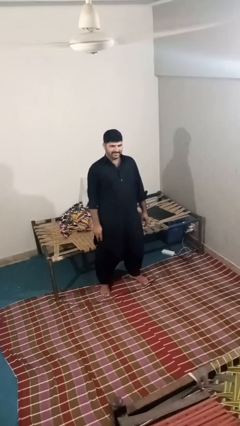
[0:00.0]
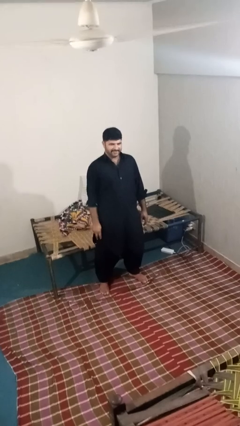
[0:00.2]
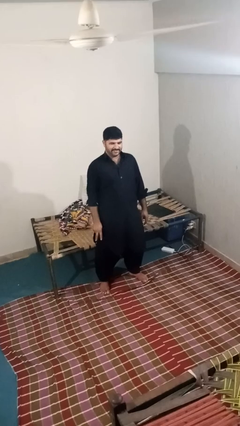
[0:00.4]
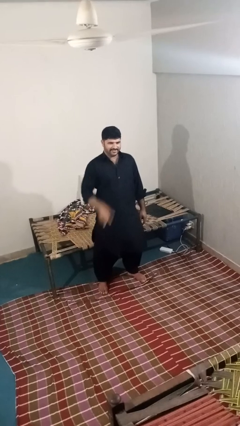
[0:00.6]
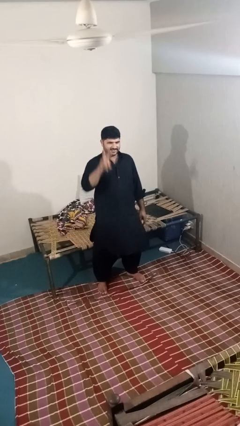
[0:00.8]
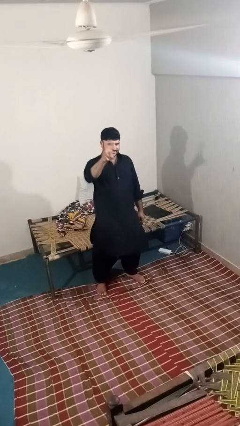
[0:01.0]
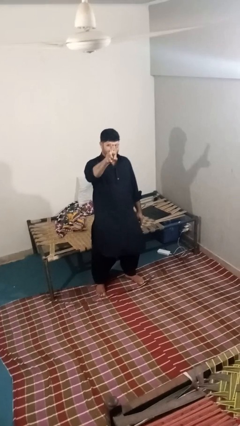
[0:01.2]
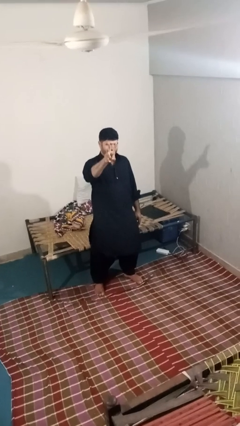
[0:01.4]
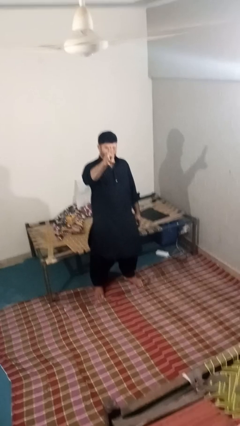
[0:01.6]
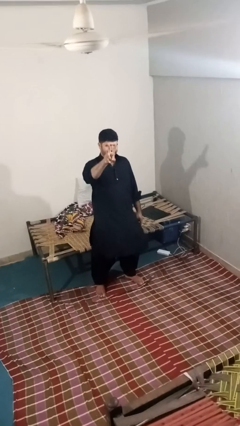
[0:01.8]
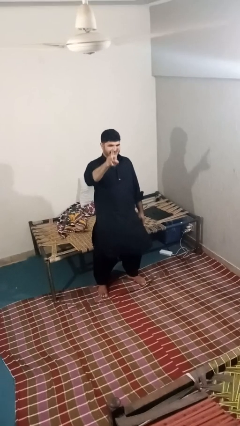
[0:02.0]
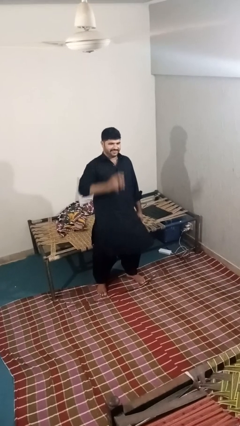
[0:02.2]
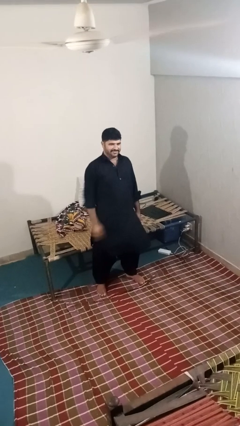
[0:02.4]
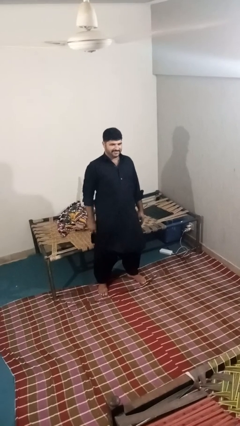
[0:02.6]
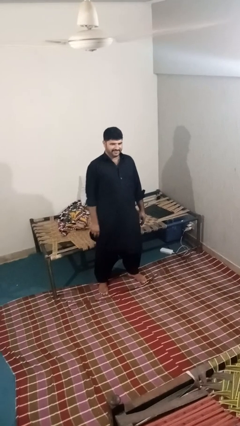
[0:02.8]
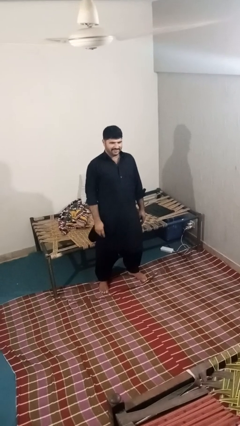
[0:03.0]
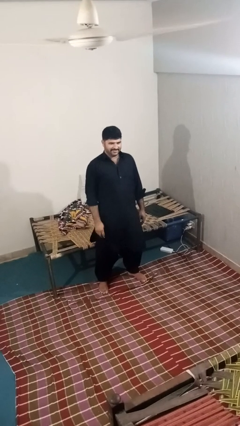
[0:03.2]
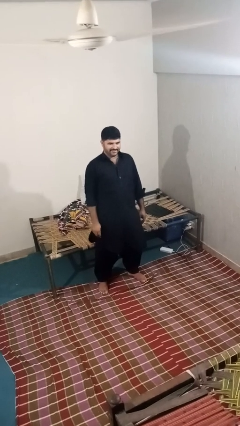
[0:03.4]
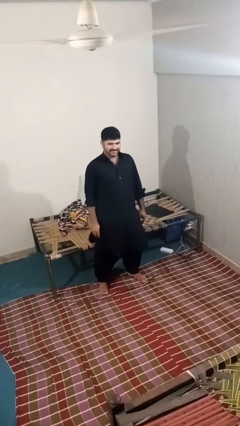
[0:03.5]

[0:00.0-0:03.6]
person gestures peace

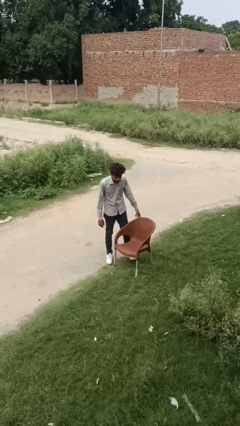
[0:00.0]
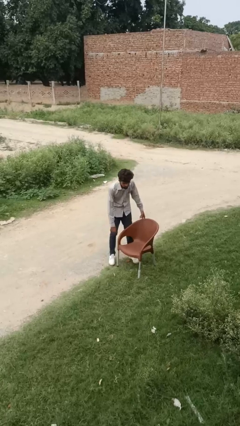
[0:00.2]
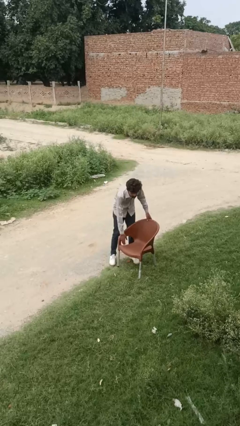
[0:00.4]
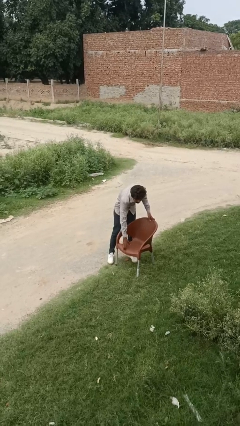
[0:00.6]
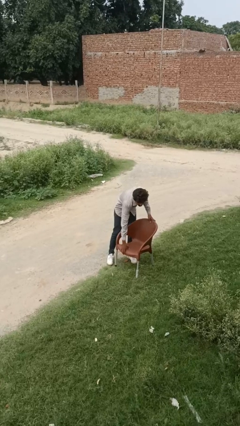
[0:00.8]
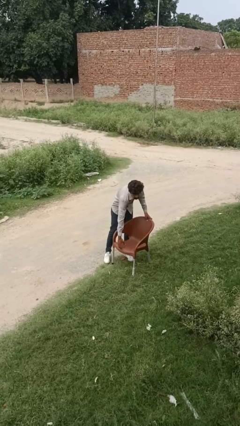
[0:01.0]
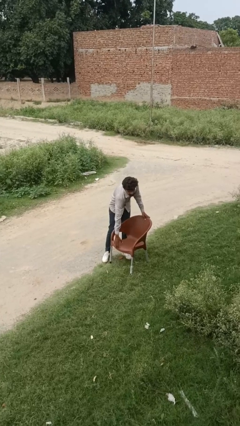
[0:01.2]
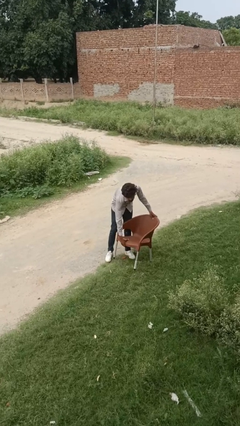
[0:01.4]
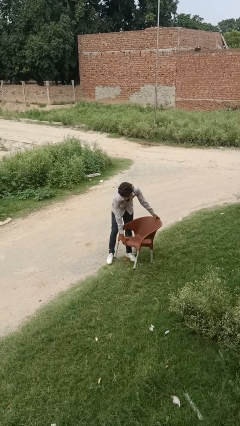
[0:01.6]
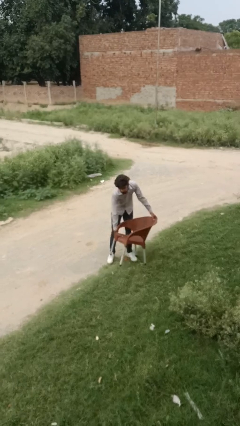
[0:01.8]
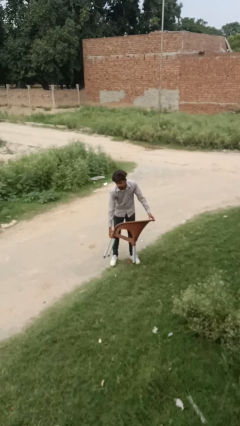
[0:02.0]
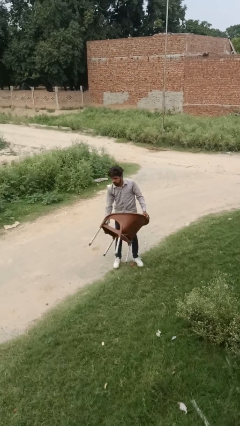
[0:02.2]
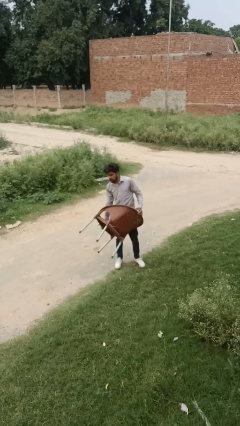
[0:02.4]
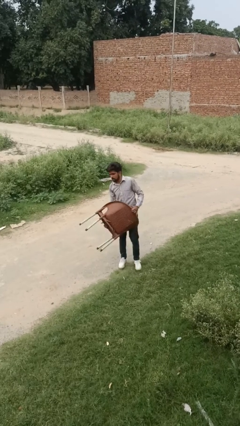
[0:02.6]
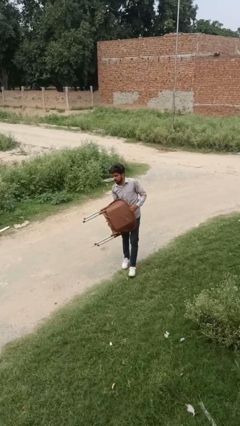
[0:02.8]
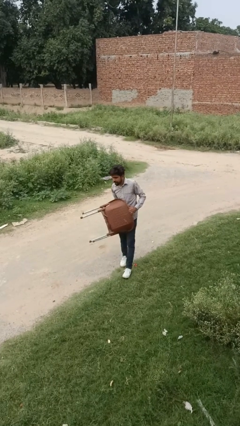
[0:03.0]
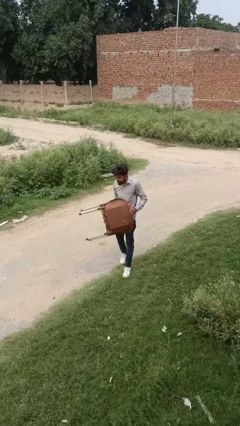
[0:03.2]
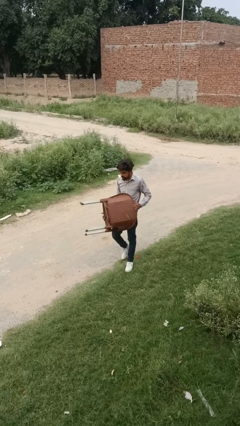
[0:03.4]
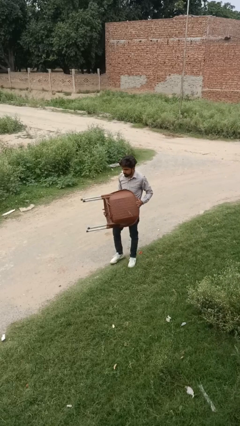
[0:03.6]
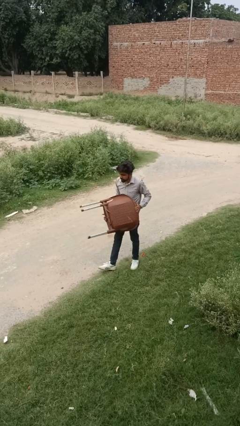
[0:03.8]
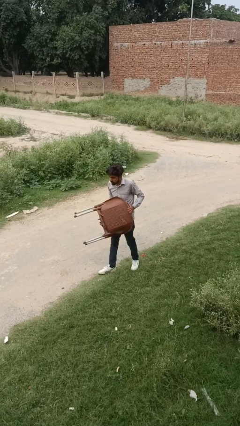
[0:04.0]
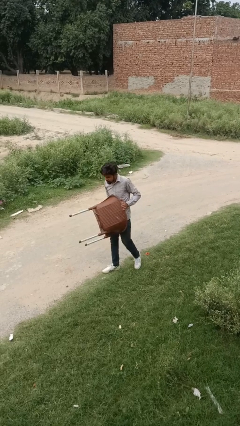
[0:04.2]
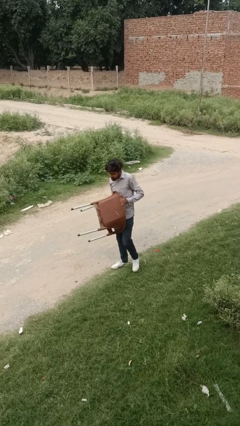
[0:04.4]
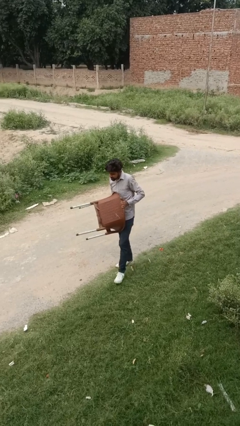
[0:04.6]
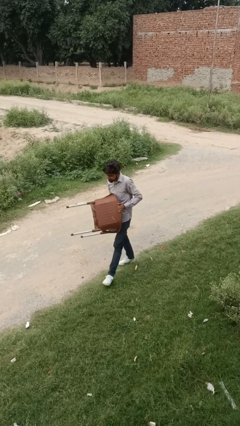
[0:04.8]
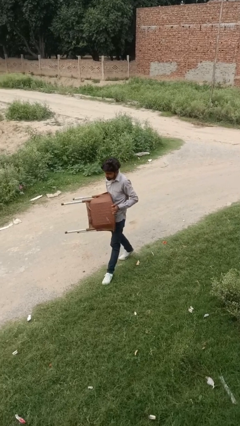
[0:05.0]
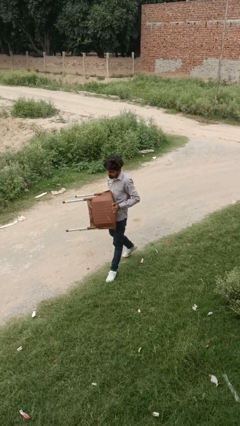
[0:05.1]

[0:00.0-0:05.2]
person carries furniture

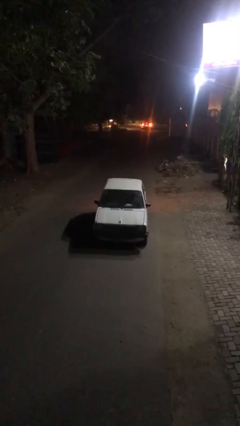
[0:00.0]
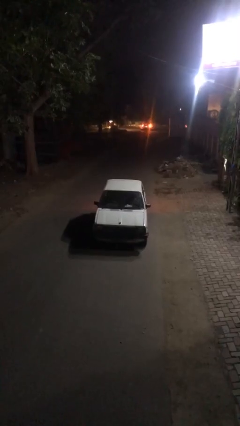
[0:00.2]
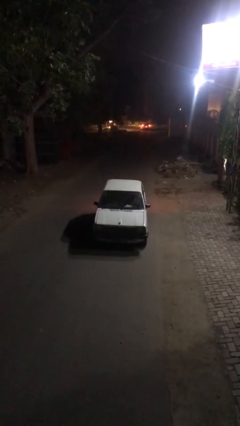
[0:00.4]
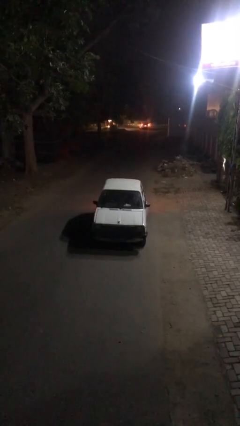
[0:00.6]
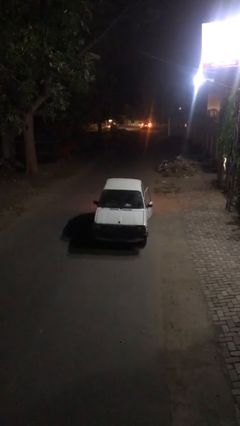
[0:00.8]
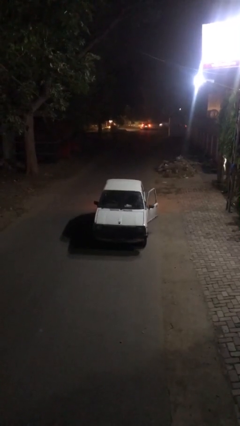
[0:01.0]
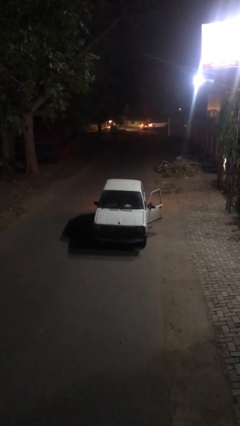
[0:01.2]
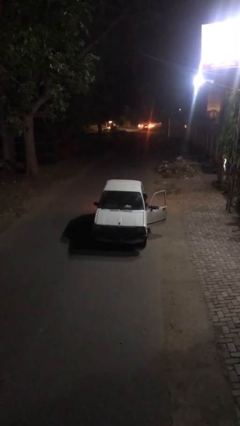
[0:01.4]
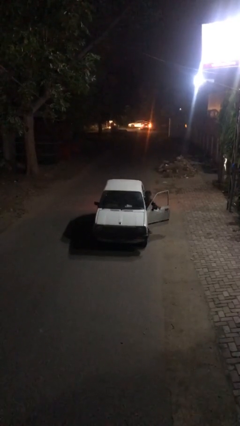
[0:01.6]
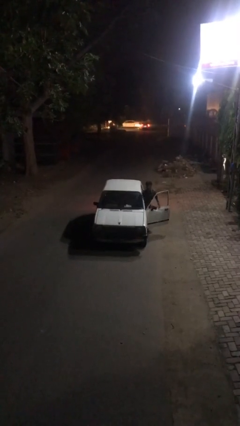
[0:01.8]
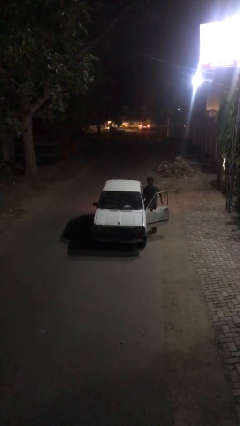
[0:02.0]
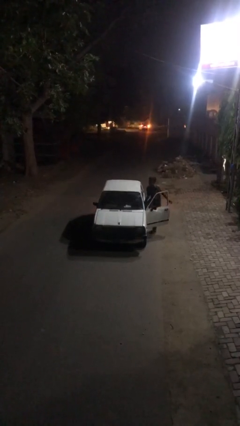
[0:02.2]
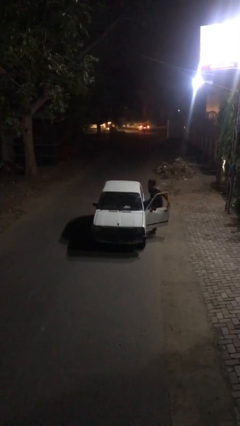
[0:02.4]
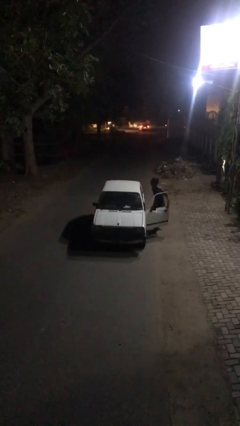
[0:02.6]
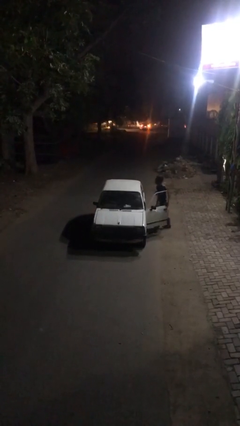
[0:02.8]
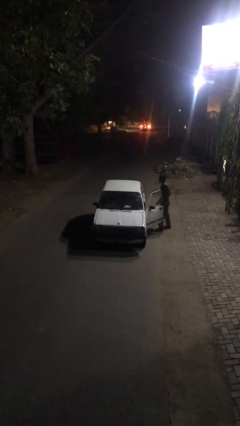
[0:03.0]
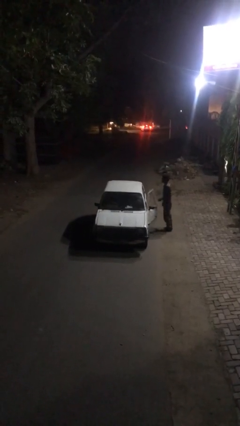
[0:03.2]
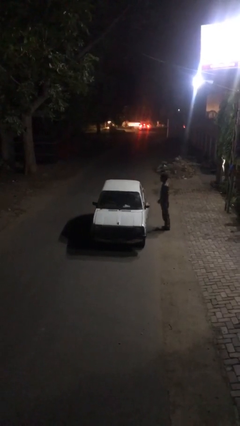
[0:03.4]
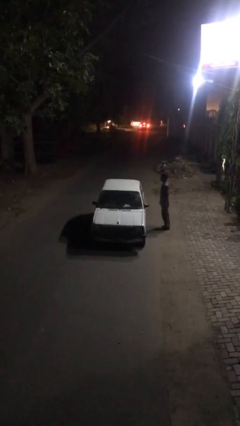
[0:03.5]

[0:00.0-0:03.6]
car drops off person

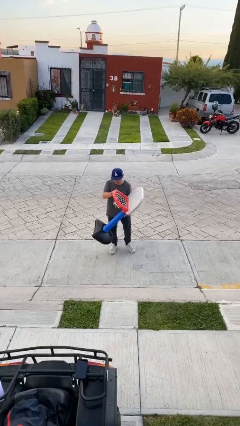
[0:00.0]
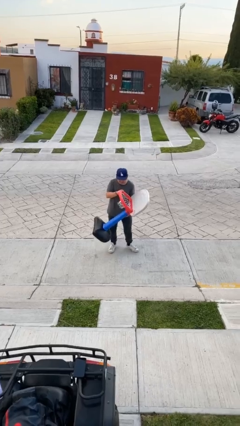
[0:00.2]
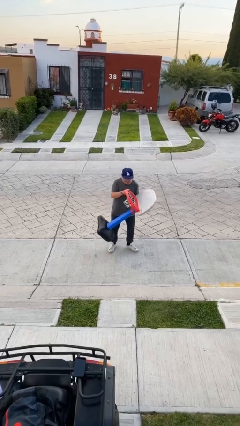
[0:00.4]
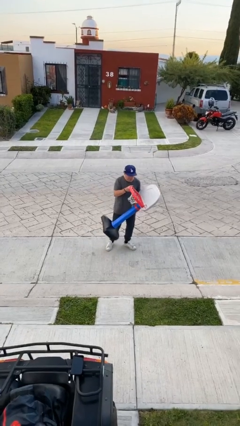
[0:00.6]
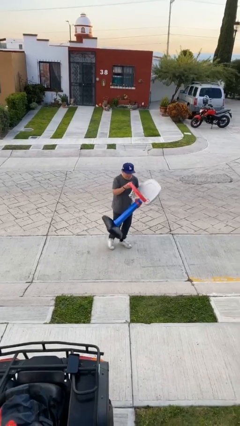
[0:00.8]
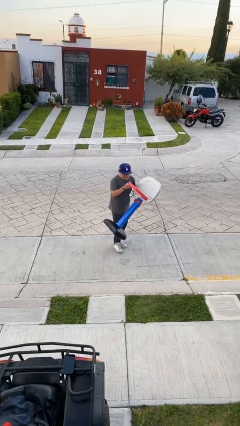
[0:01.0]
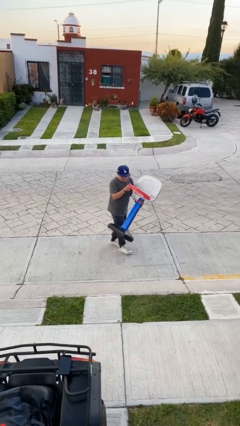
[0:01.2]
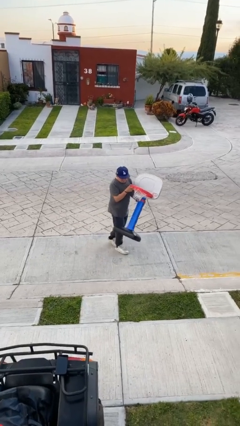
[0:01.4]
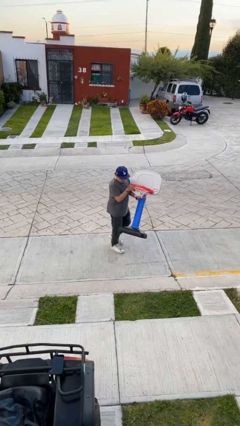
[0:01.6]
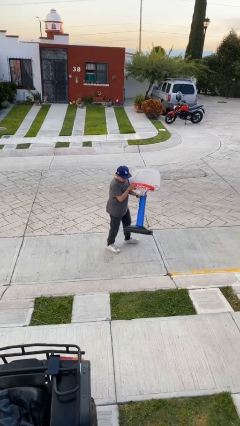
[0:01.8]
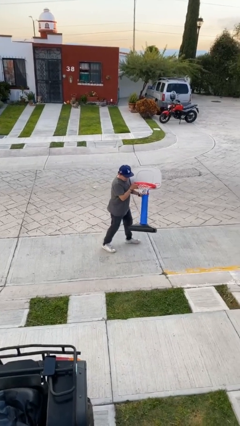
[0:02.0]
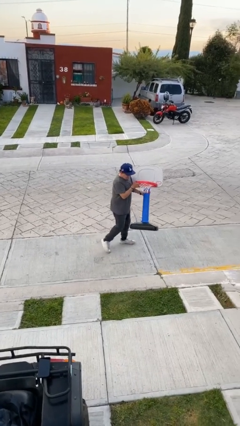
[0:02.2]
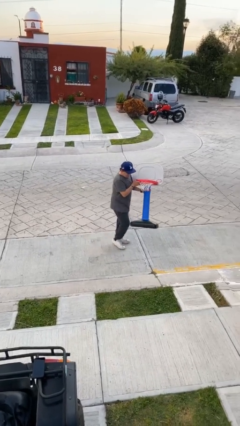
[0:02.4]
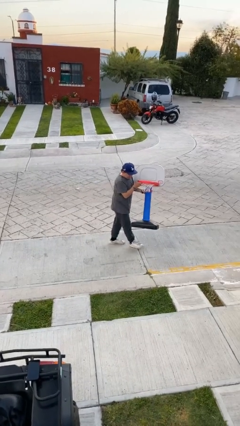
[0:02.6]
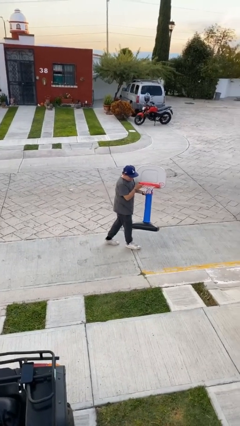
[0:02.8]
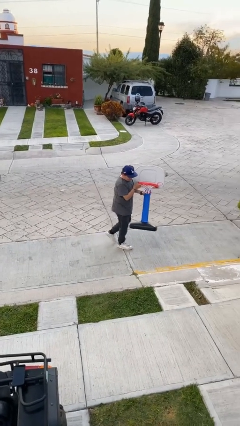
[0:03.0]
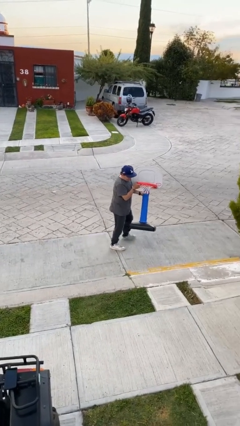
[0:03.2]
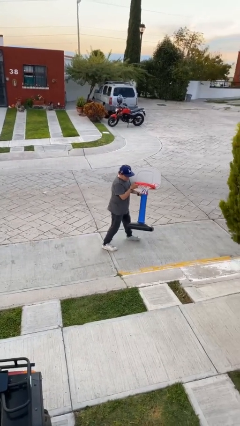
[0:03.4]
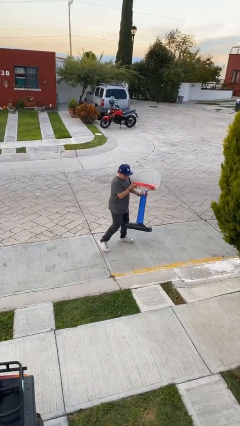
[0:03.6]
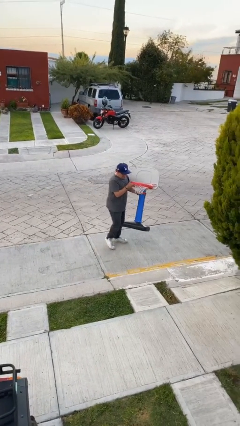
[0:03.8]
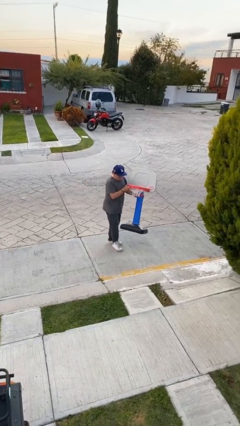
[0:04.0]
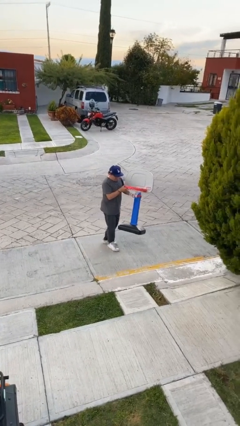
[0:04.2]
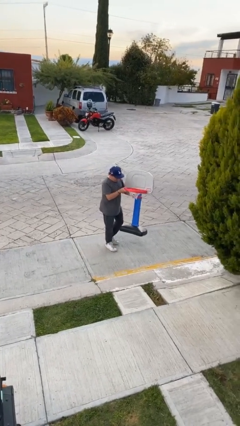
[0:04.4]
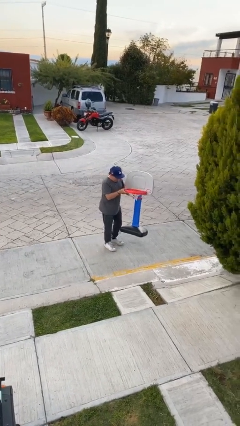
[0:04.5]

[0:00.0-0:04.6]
person carries heavy object

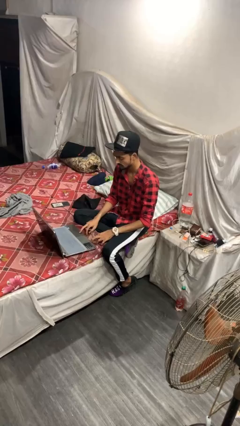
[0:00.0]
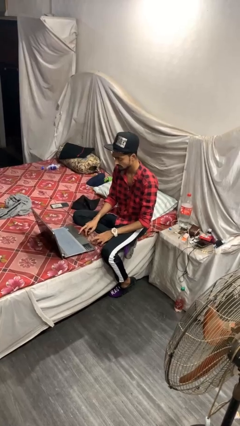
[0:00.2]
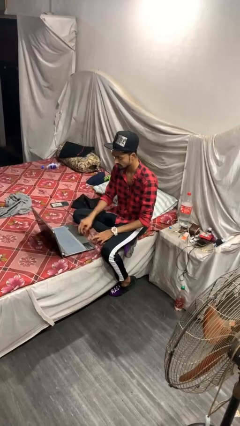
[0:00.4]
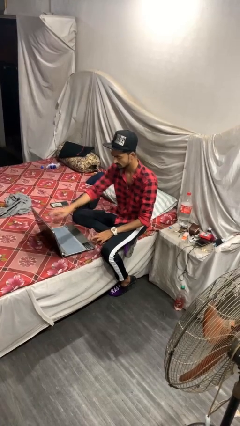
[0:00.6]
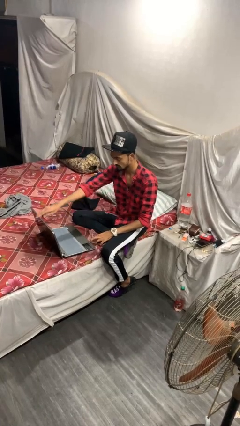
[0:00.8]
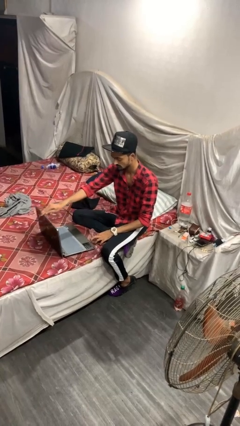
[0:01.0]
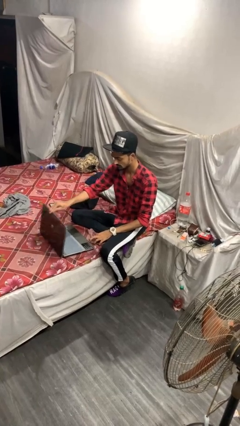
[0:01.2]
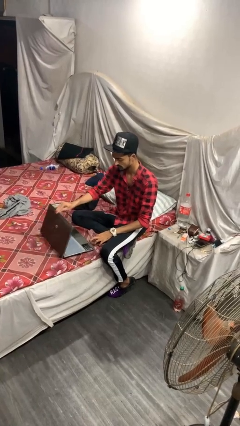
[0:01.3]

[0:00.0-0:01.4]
person closes laptop
